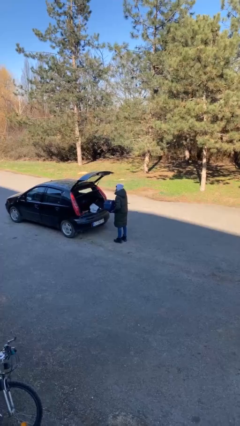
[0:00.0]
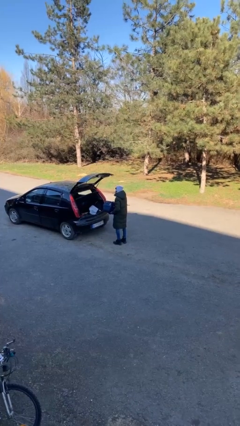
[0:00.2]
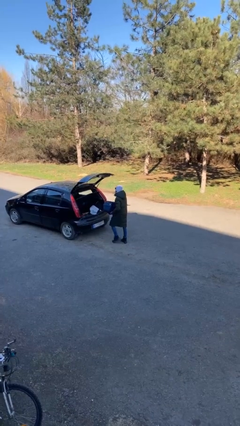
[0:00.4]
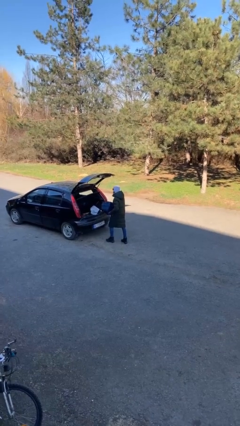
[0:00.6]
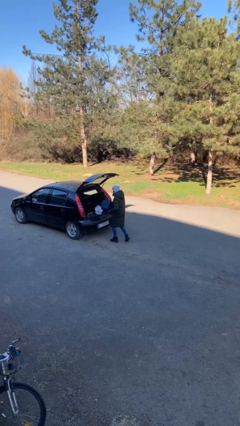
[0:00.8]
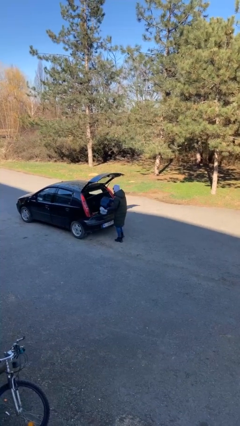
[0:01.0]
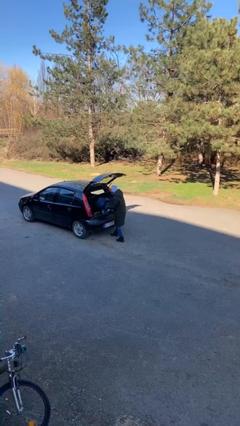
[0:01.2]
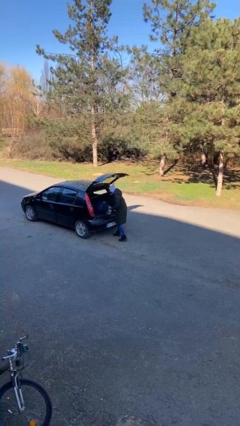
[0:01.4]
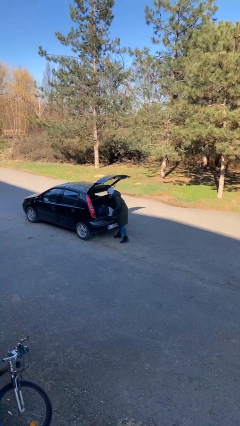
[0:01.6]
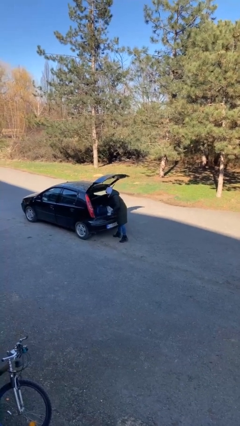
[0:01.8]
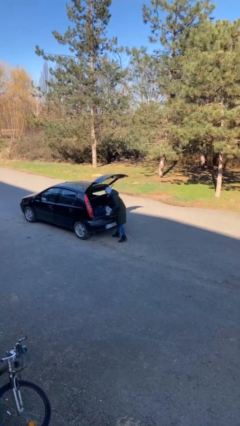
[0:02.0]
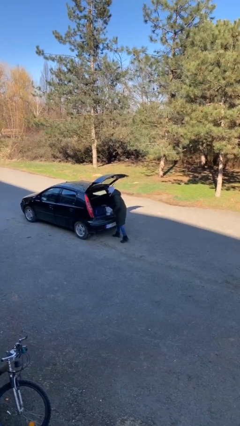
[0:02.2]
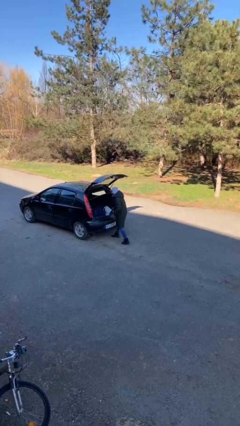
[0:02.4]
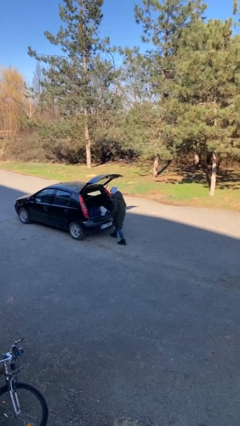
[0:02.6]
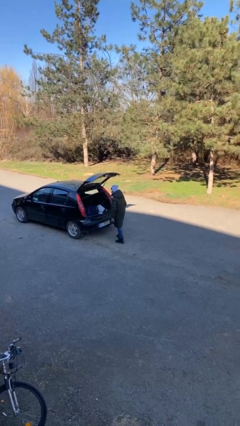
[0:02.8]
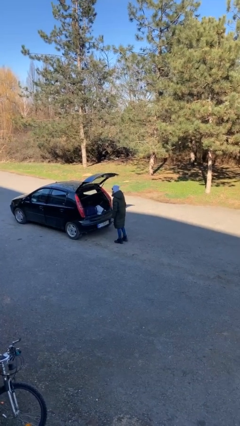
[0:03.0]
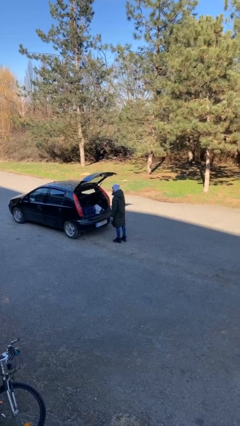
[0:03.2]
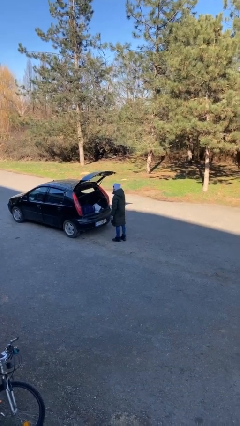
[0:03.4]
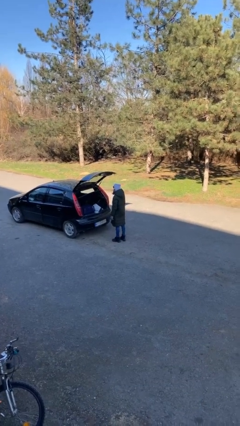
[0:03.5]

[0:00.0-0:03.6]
person loads car

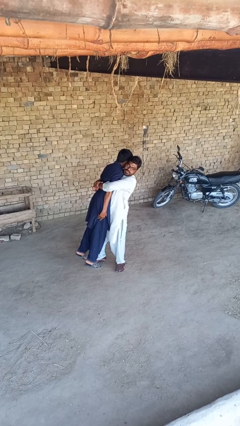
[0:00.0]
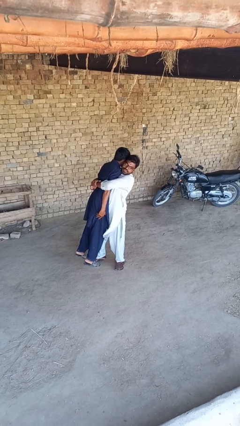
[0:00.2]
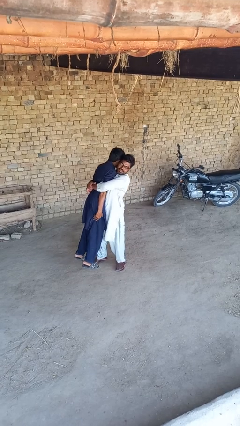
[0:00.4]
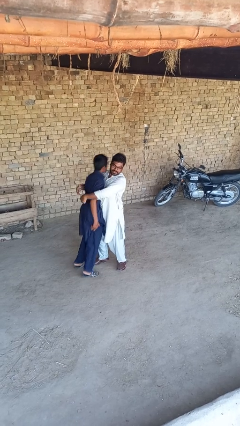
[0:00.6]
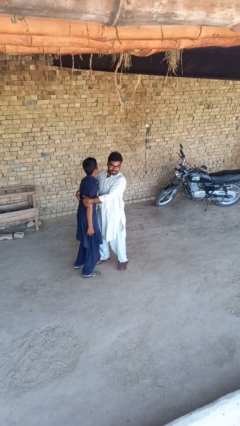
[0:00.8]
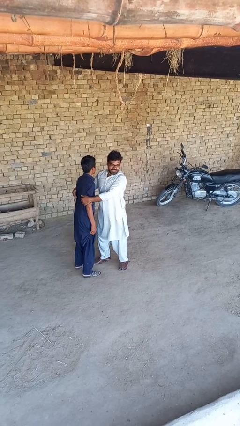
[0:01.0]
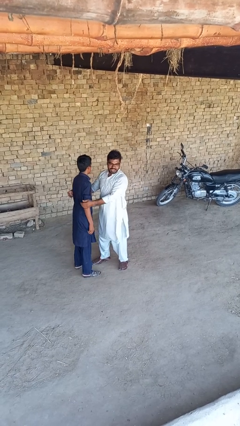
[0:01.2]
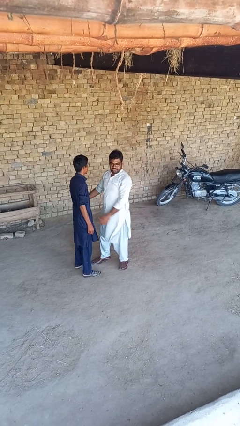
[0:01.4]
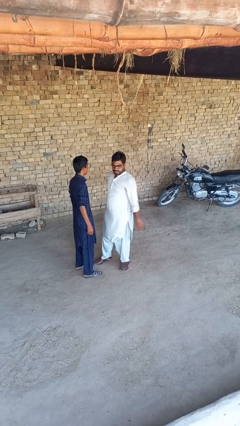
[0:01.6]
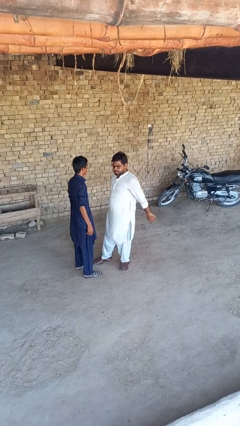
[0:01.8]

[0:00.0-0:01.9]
person puts down person

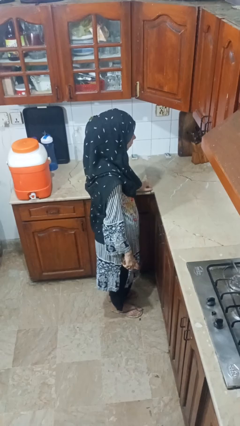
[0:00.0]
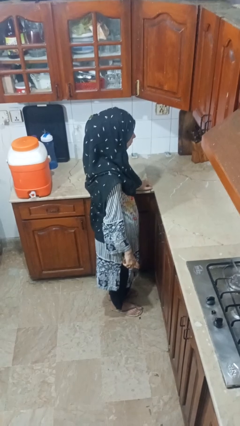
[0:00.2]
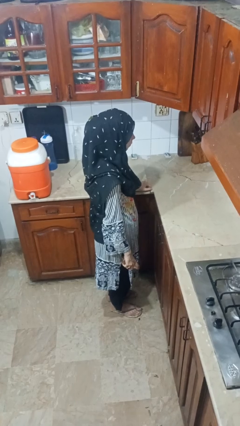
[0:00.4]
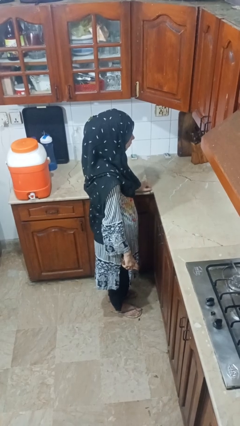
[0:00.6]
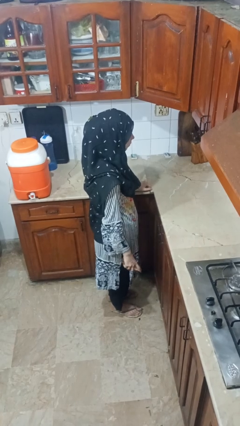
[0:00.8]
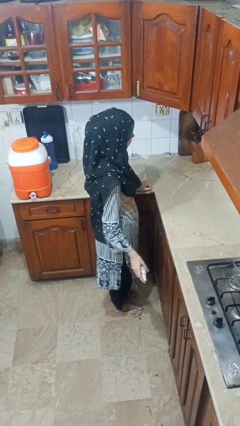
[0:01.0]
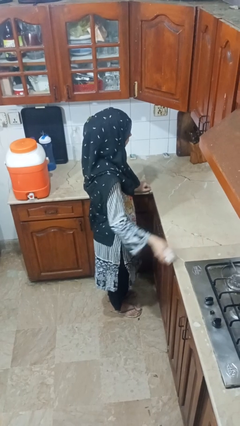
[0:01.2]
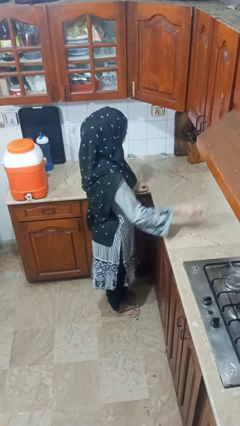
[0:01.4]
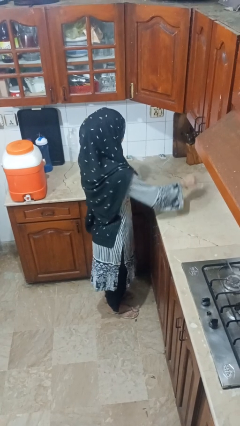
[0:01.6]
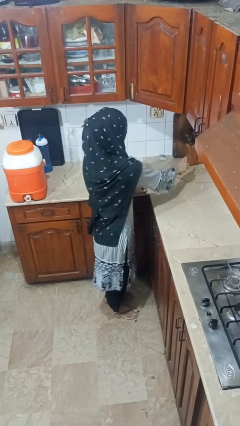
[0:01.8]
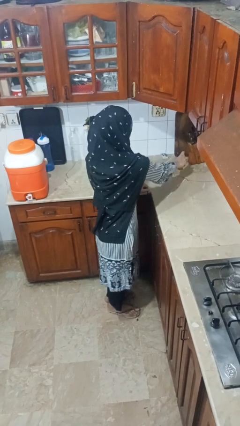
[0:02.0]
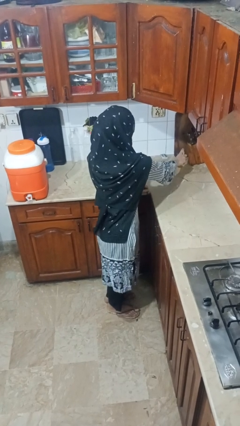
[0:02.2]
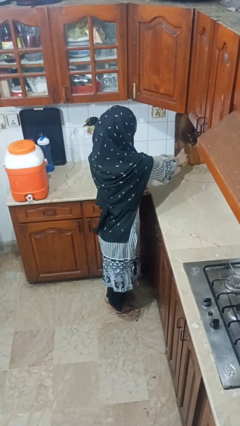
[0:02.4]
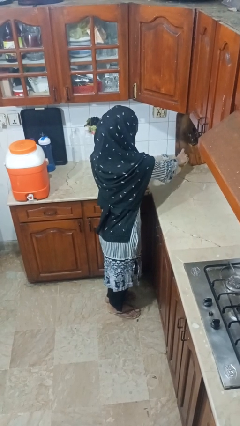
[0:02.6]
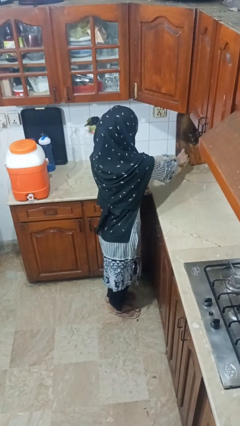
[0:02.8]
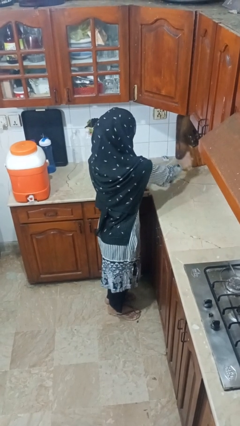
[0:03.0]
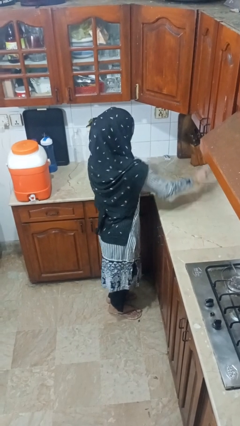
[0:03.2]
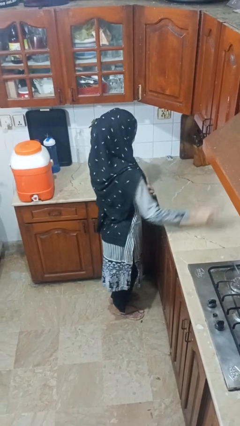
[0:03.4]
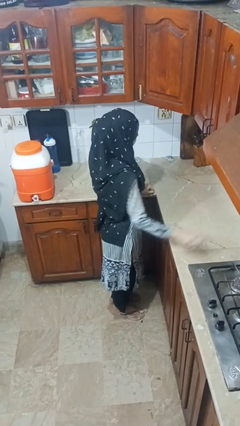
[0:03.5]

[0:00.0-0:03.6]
person sprays from bottle

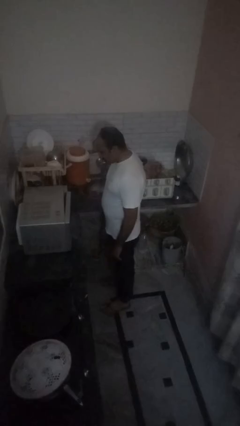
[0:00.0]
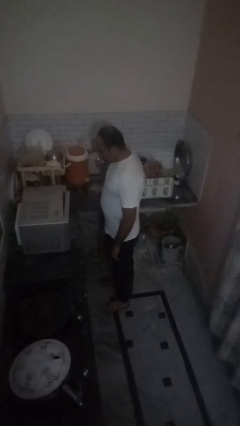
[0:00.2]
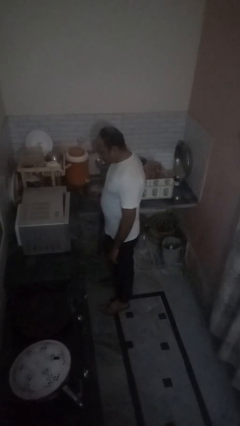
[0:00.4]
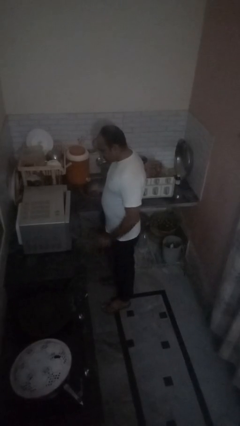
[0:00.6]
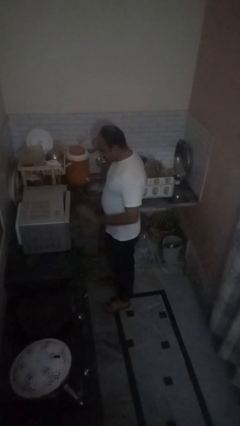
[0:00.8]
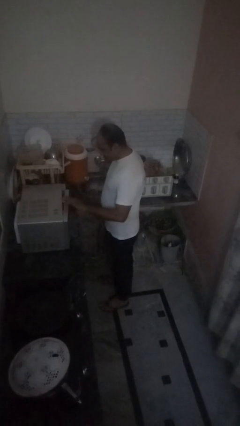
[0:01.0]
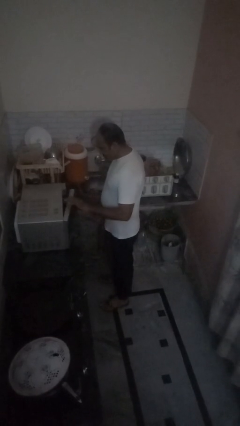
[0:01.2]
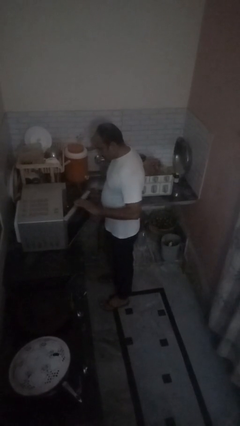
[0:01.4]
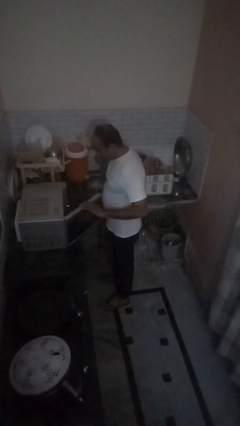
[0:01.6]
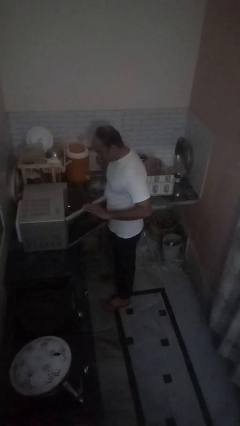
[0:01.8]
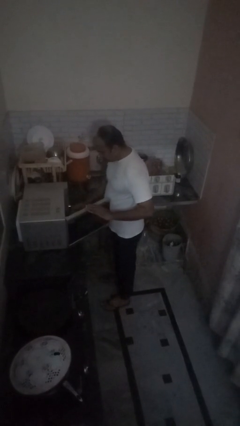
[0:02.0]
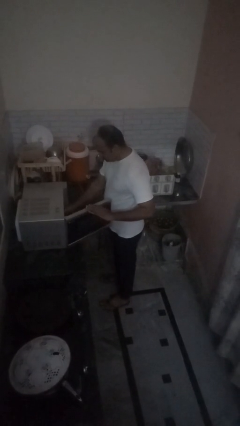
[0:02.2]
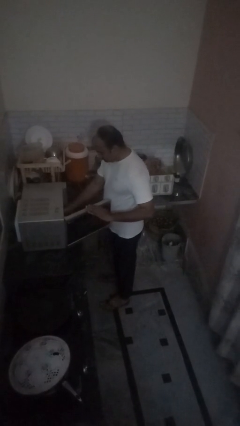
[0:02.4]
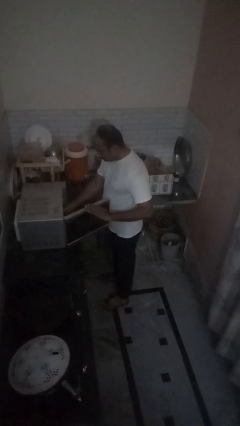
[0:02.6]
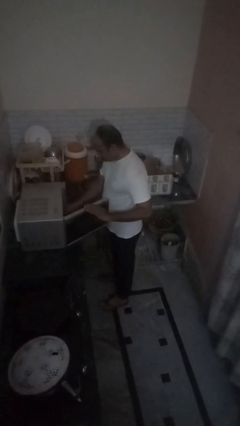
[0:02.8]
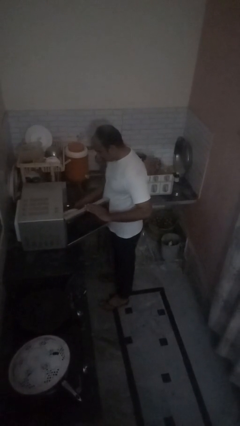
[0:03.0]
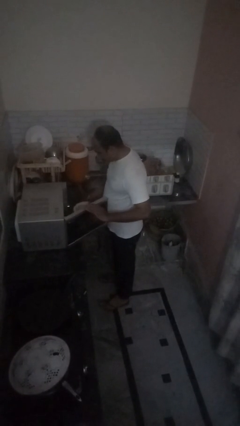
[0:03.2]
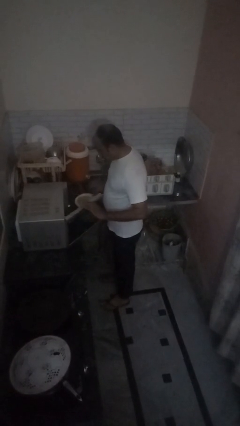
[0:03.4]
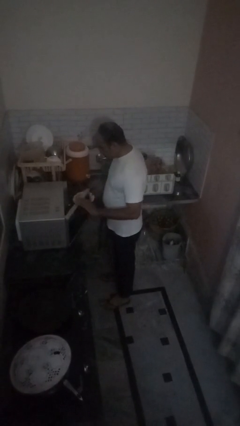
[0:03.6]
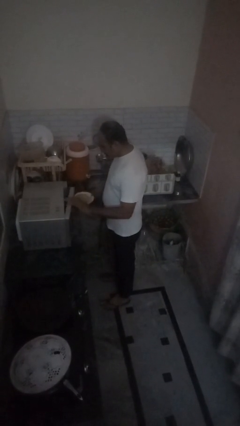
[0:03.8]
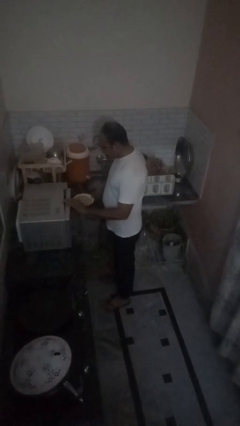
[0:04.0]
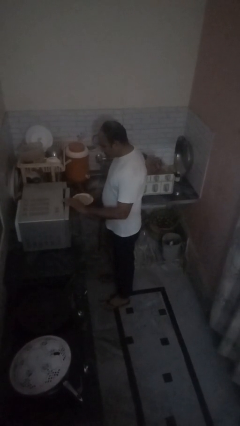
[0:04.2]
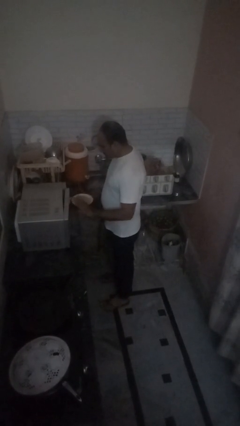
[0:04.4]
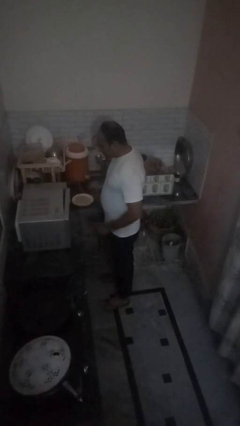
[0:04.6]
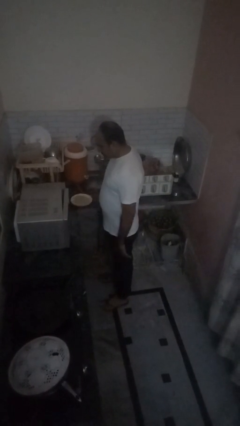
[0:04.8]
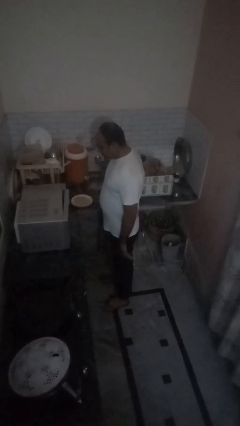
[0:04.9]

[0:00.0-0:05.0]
person takes object from oven

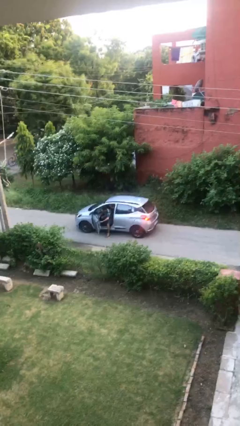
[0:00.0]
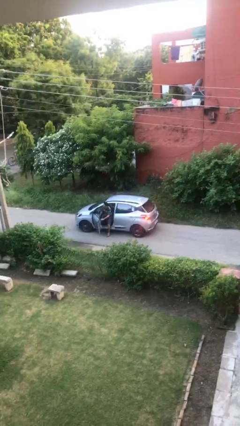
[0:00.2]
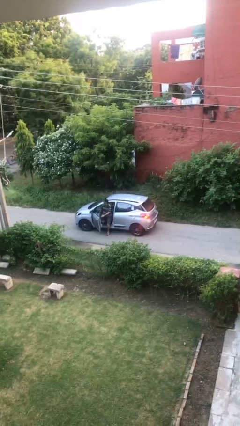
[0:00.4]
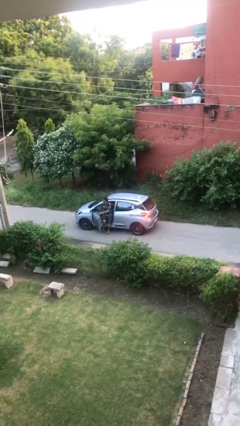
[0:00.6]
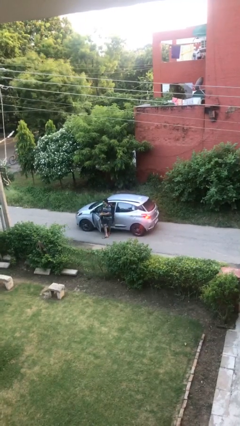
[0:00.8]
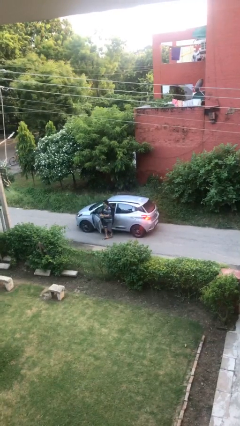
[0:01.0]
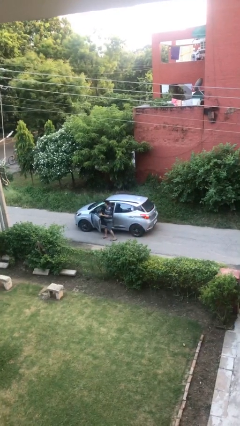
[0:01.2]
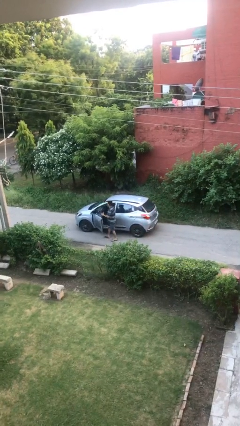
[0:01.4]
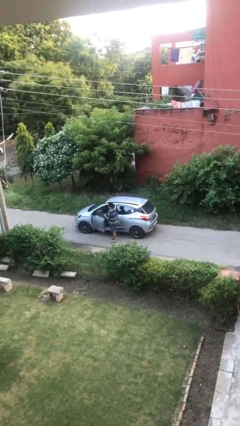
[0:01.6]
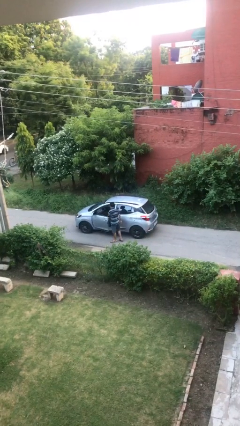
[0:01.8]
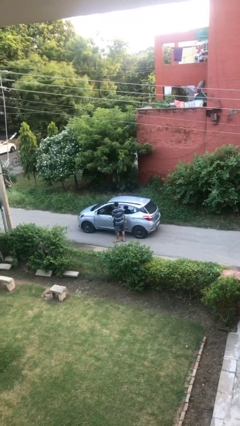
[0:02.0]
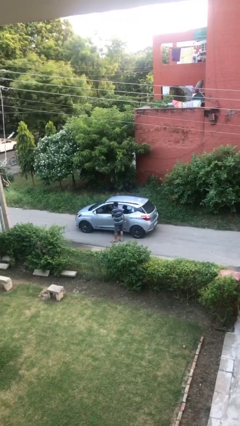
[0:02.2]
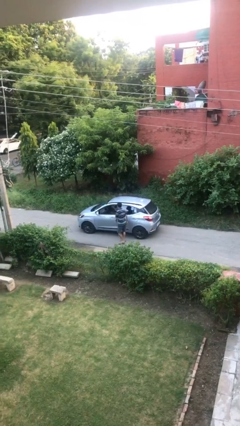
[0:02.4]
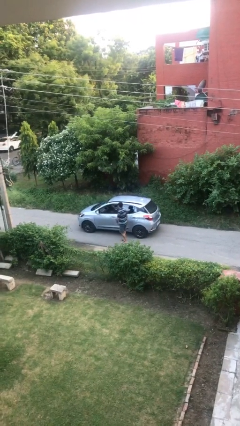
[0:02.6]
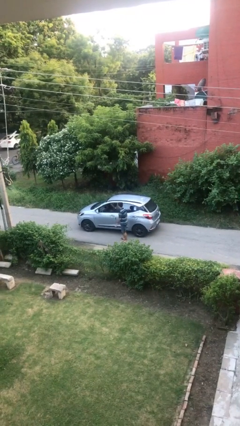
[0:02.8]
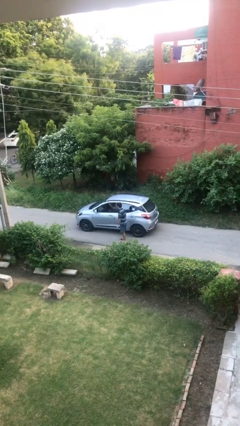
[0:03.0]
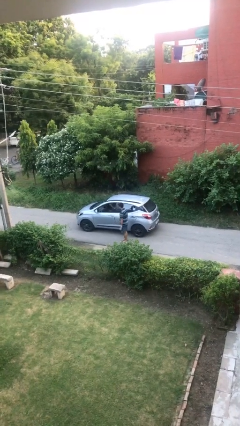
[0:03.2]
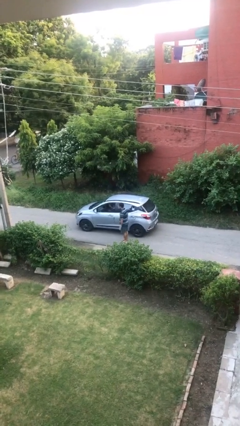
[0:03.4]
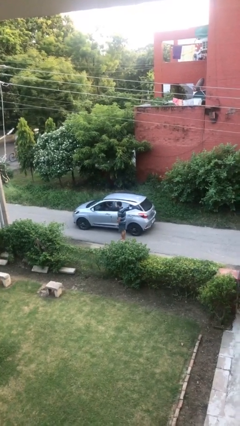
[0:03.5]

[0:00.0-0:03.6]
car drops off person

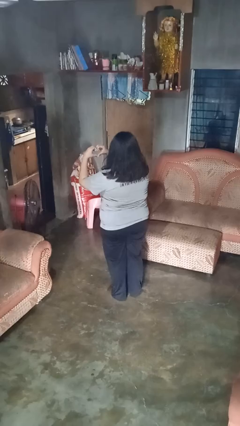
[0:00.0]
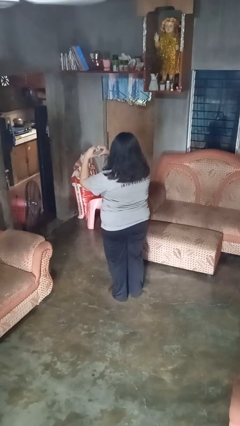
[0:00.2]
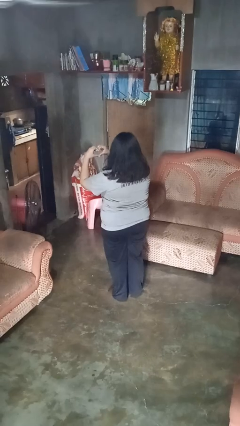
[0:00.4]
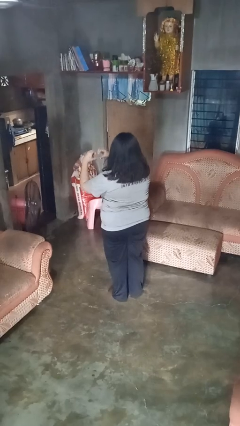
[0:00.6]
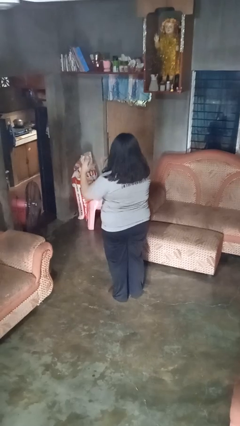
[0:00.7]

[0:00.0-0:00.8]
person gestures heart
